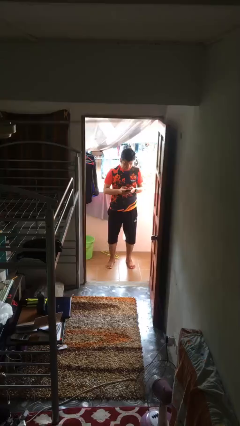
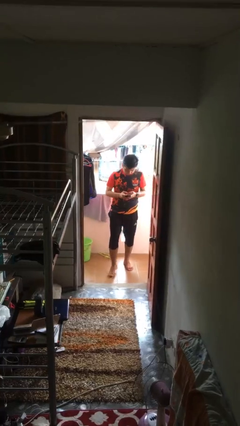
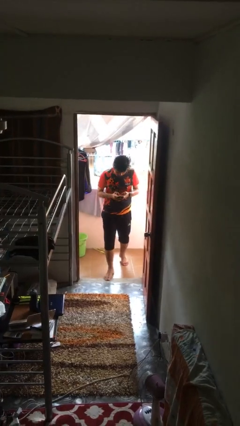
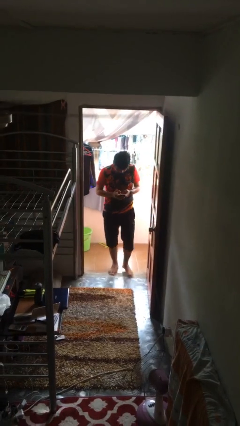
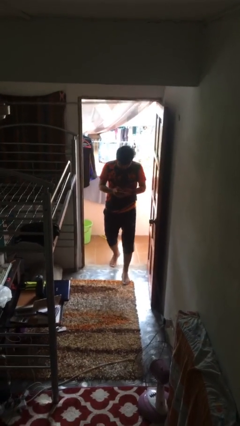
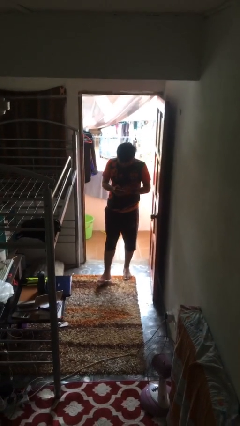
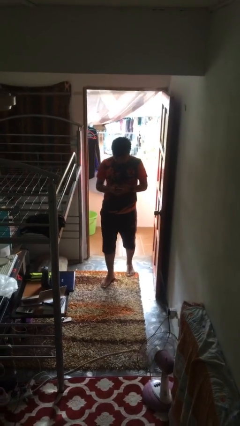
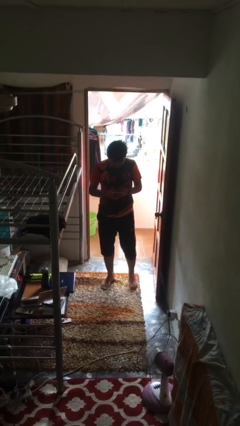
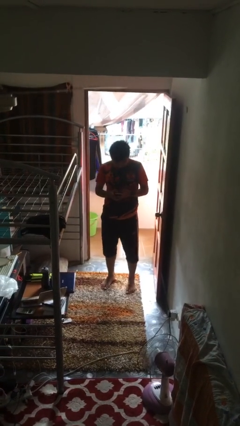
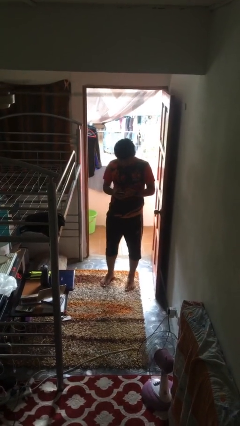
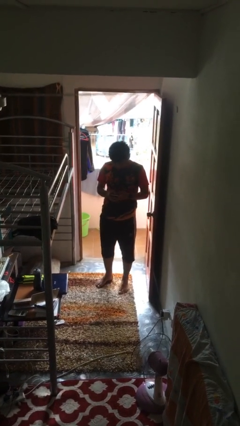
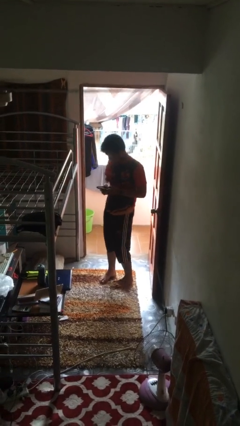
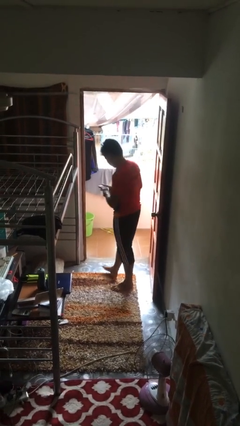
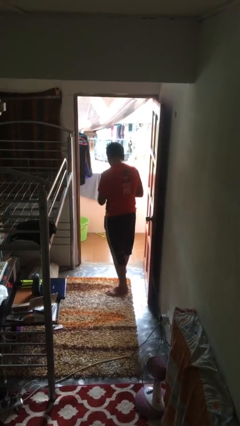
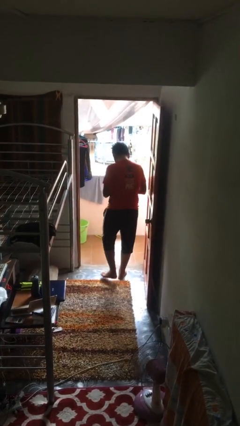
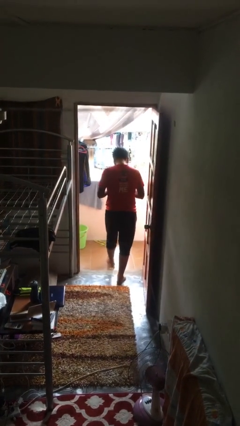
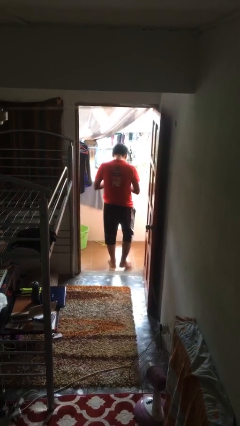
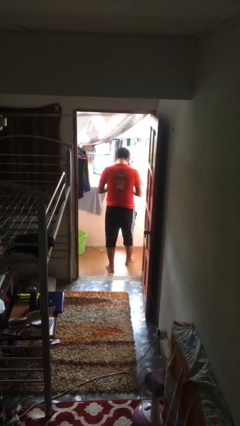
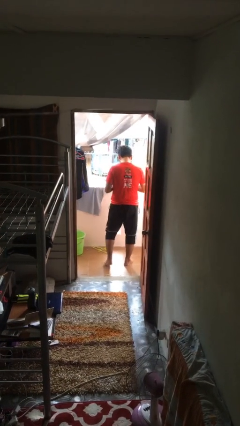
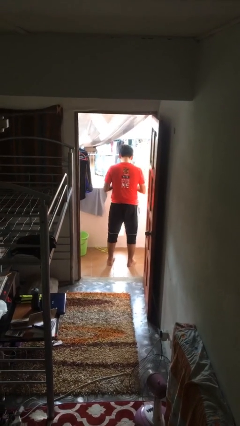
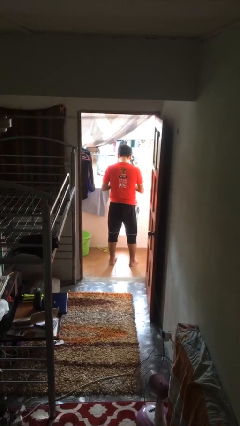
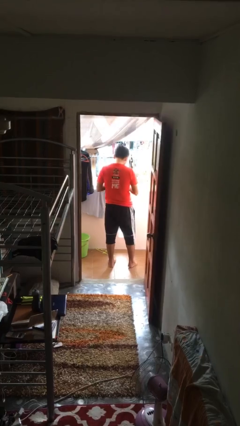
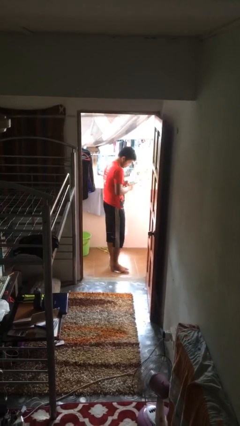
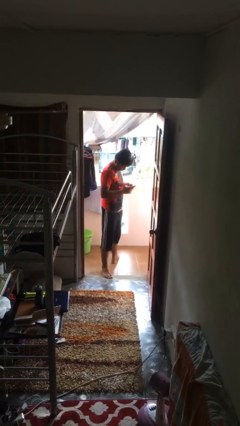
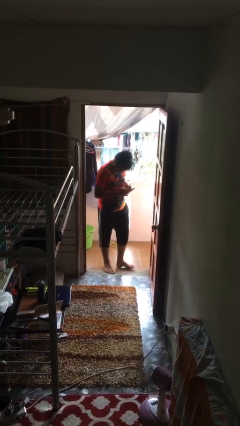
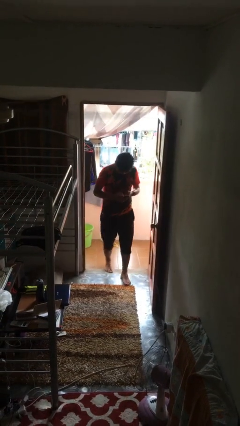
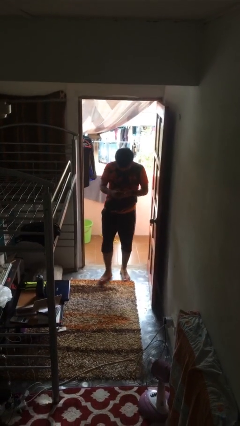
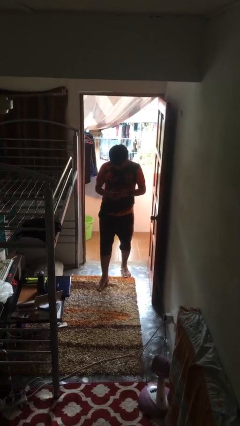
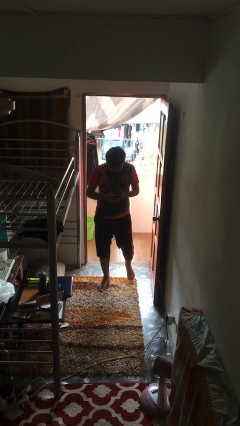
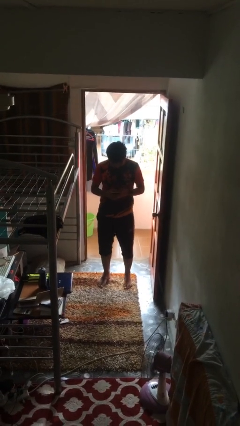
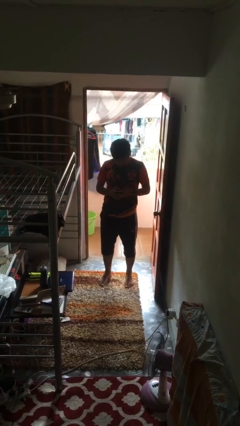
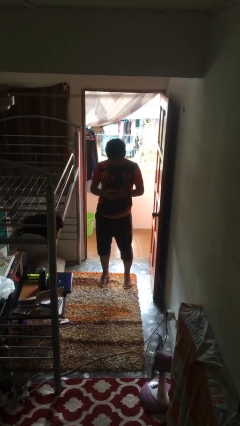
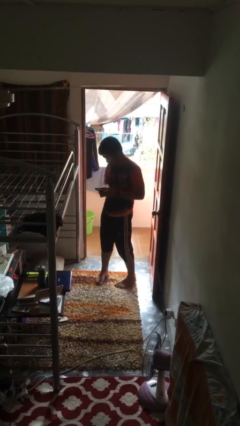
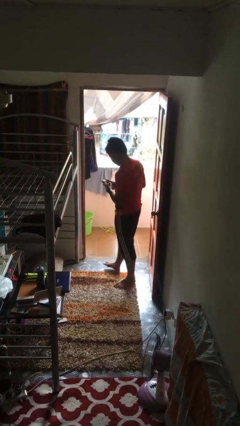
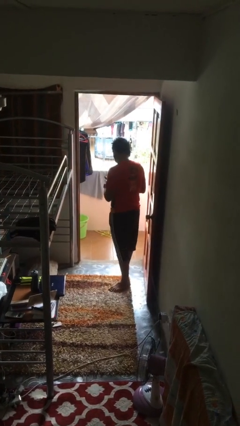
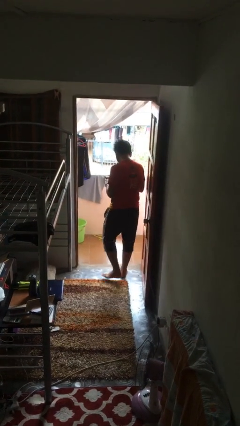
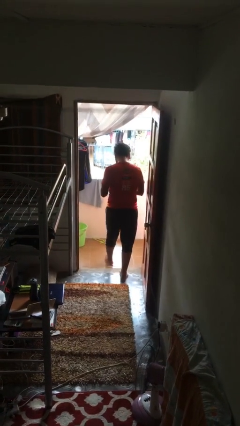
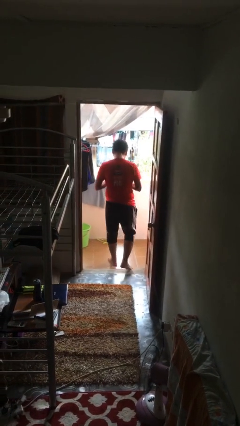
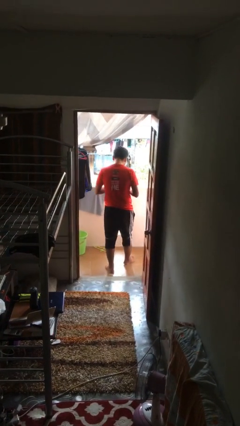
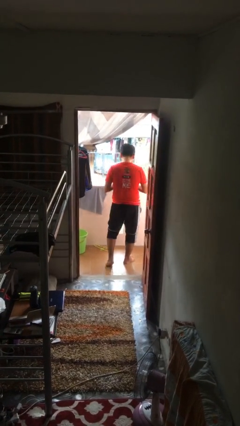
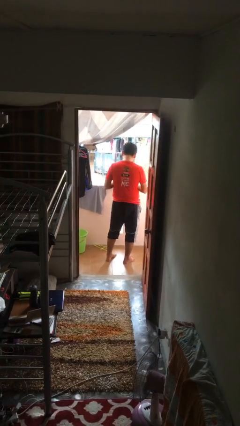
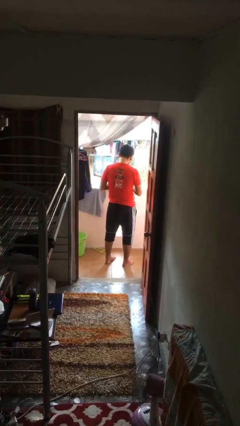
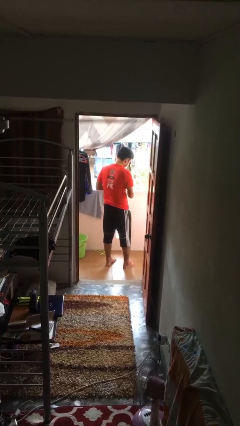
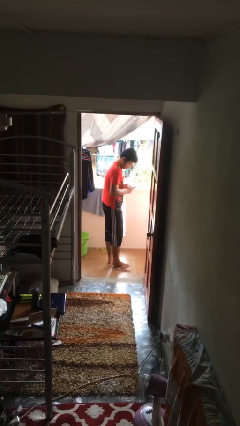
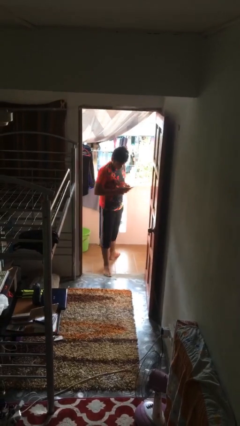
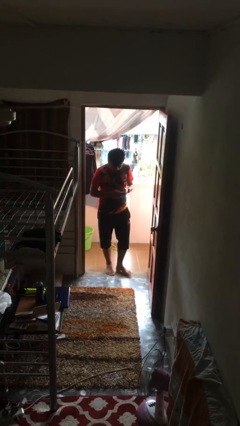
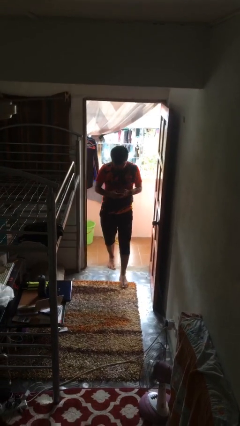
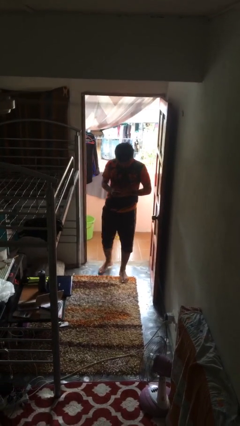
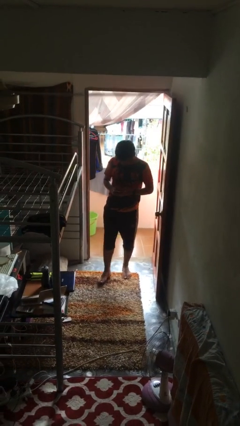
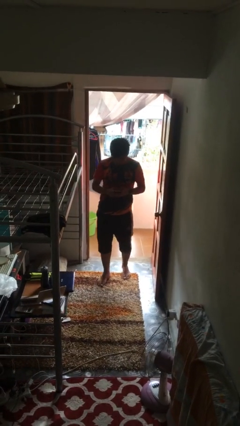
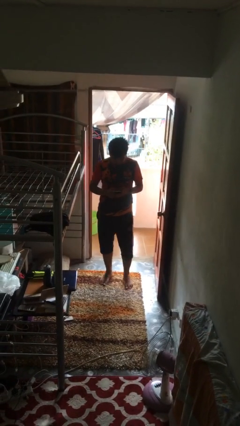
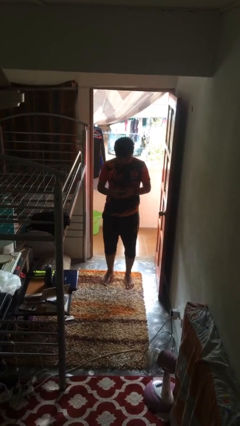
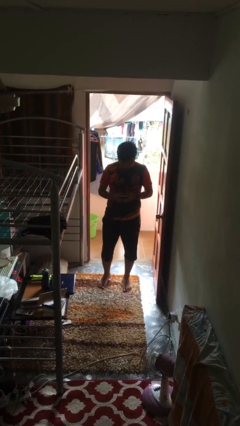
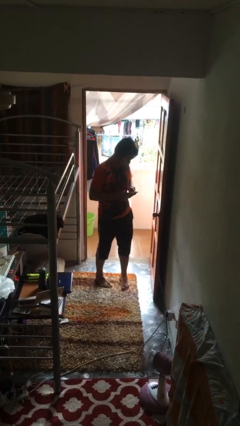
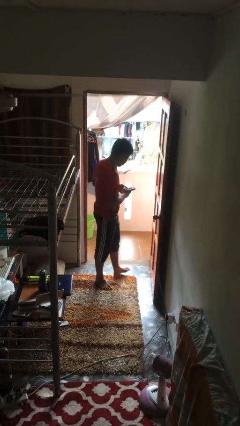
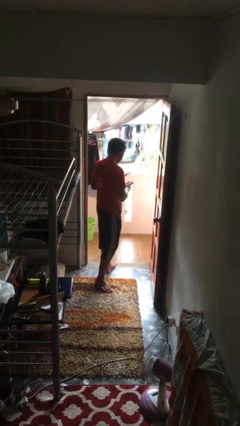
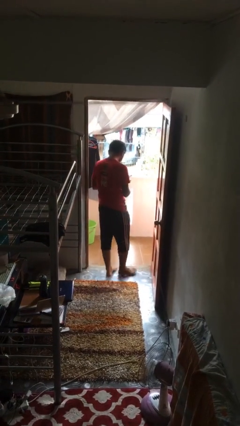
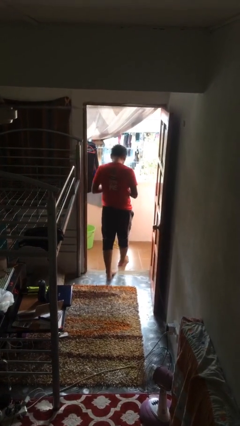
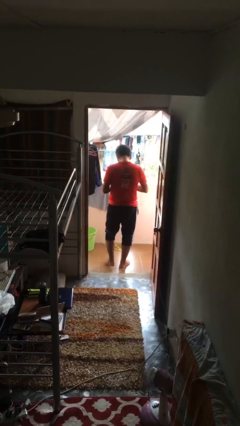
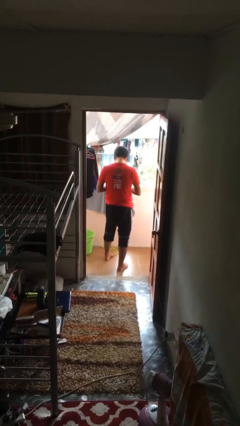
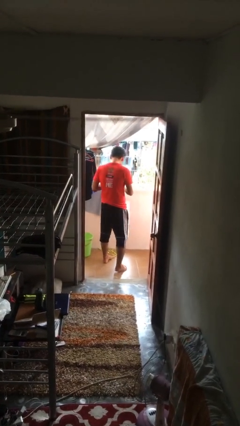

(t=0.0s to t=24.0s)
person texts on phone

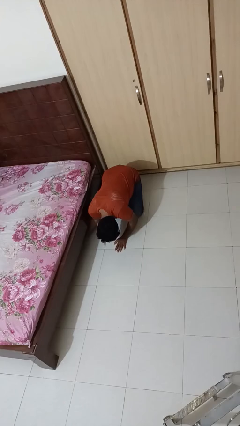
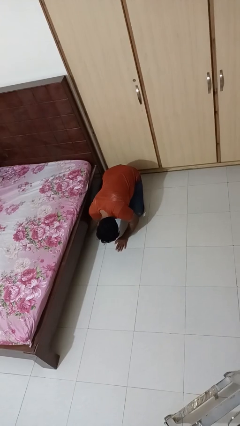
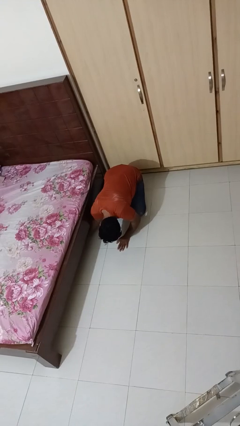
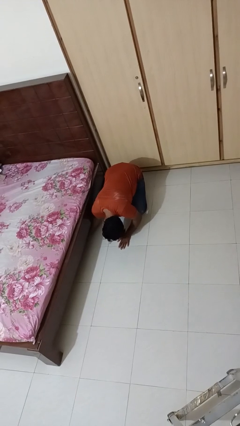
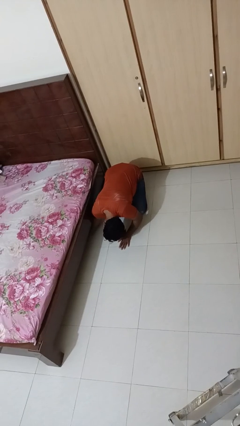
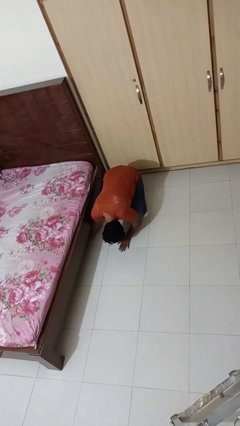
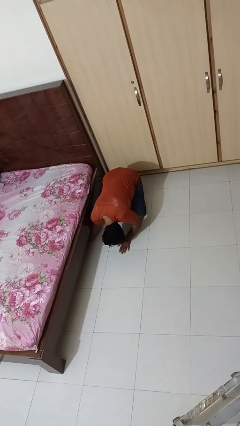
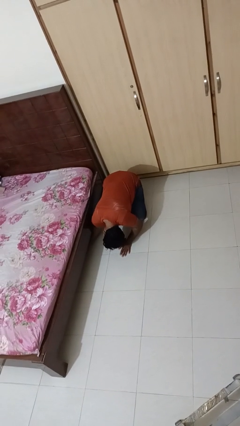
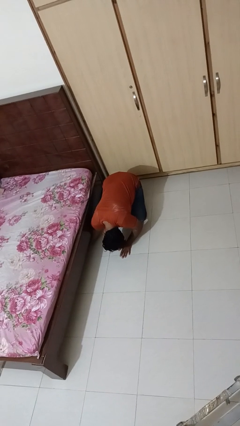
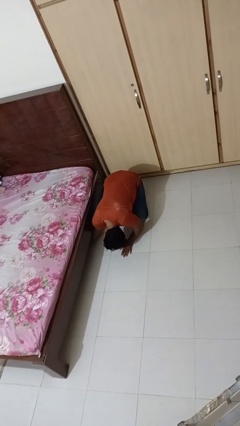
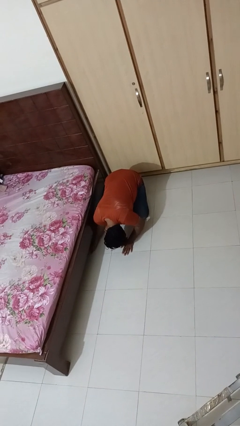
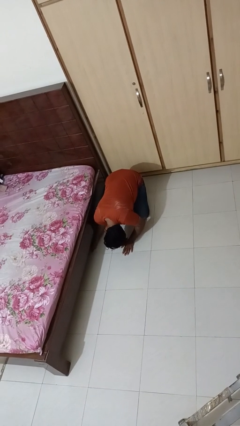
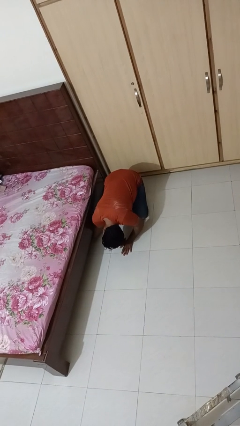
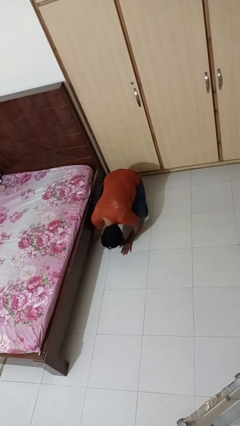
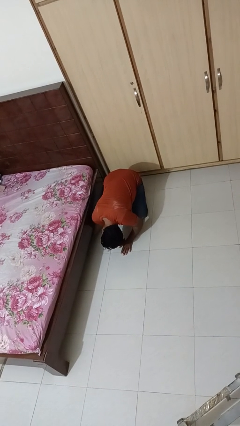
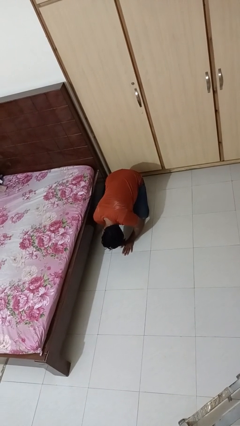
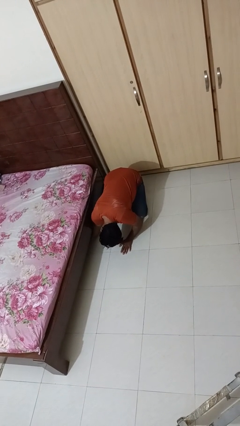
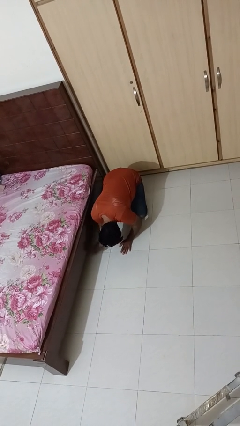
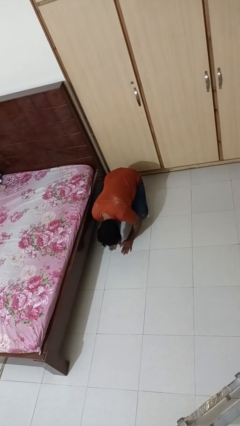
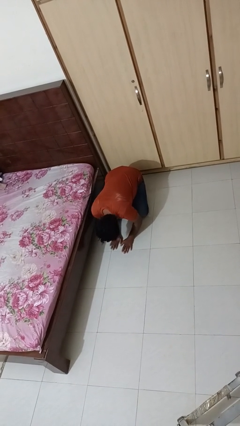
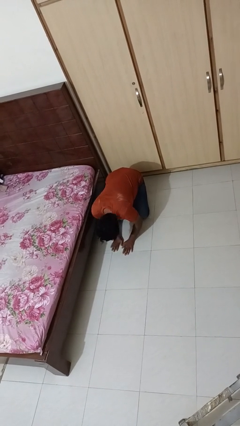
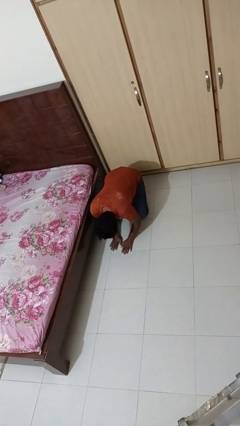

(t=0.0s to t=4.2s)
person searches under bed

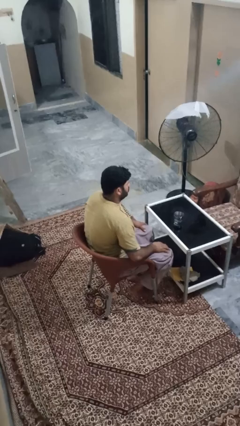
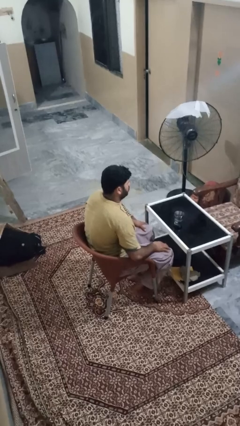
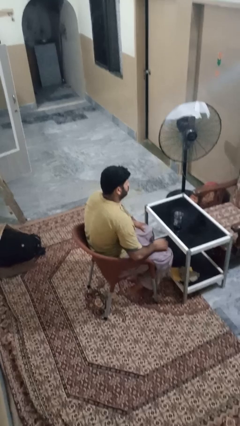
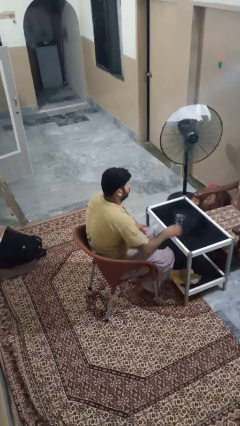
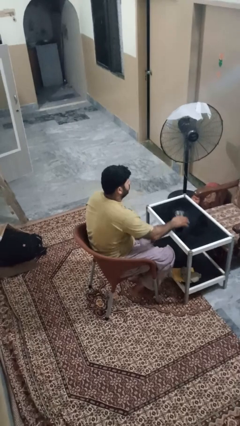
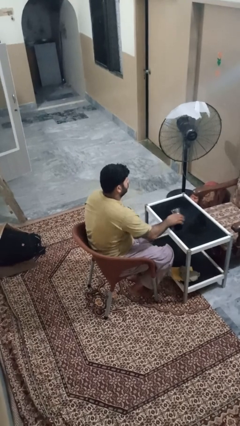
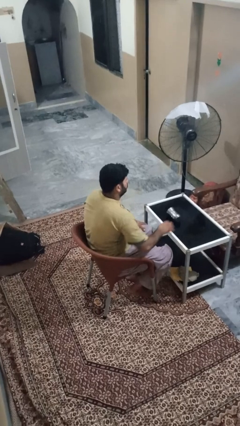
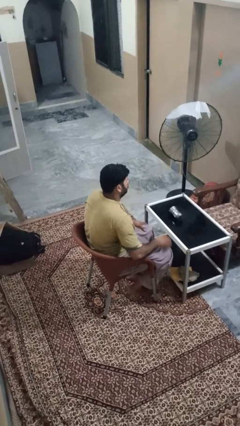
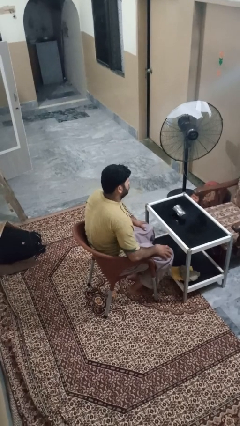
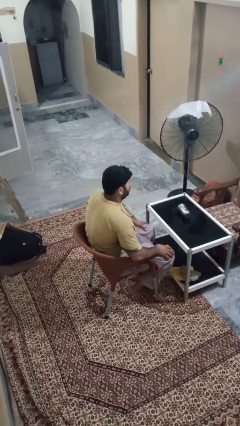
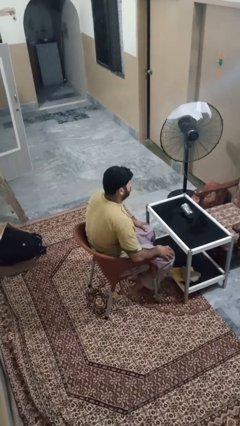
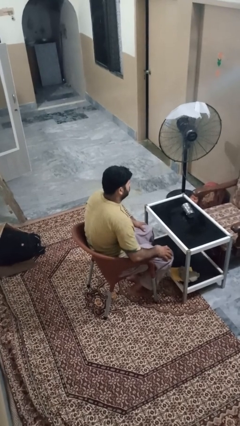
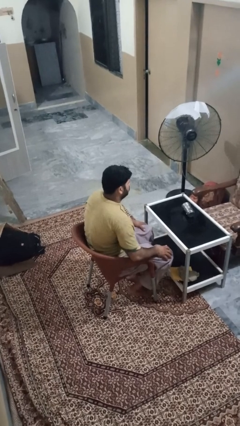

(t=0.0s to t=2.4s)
person knocks over glass
